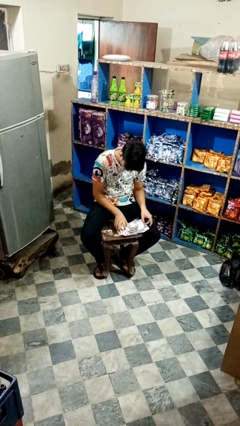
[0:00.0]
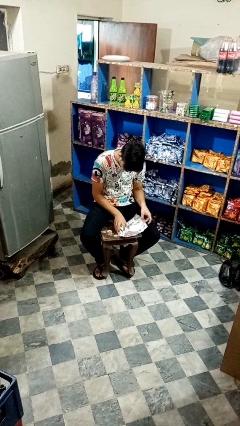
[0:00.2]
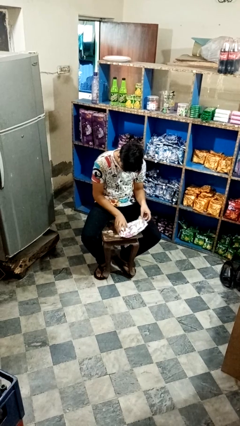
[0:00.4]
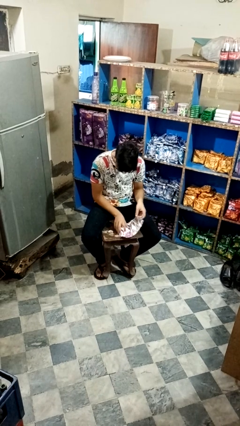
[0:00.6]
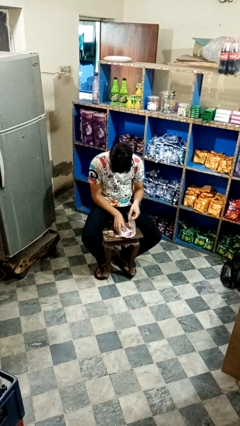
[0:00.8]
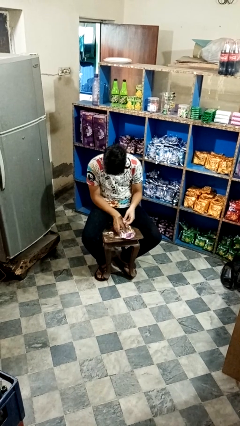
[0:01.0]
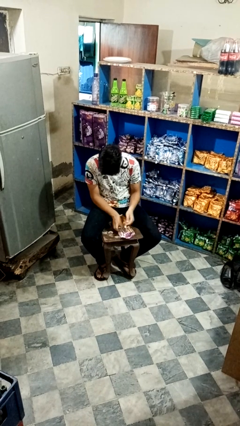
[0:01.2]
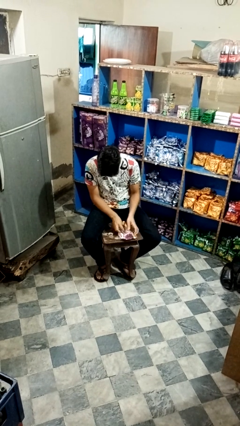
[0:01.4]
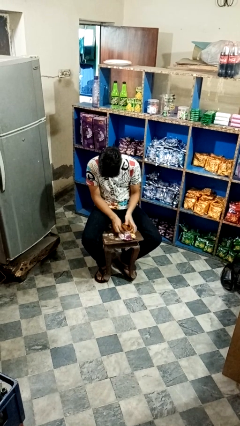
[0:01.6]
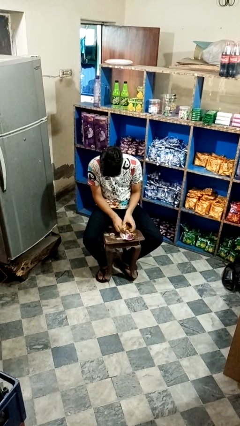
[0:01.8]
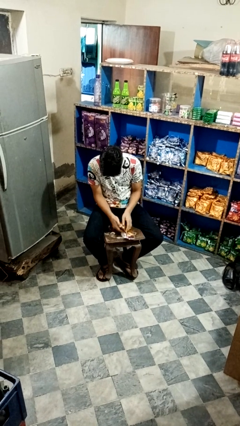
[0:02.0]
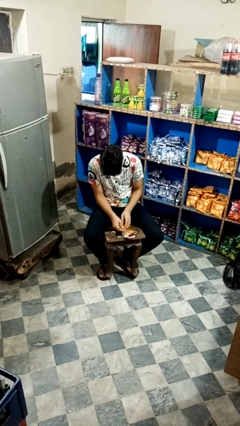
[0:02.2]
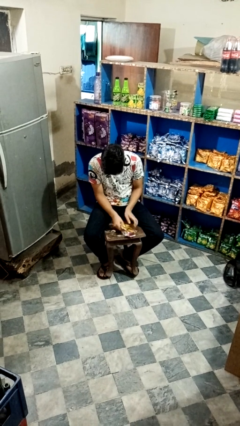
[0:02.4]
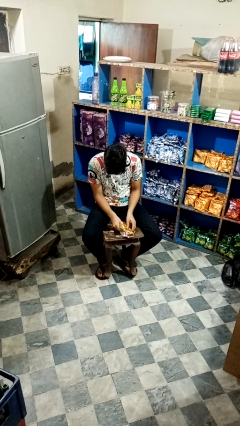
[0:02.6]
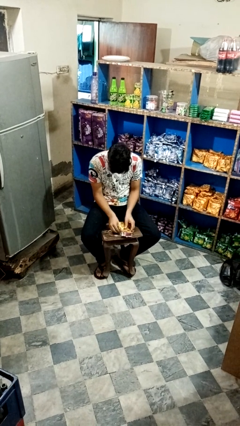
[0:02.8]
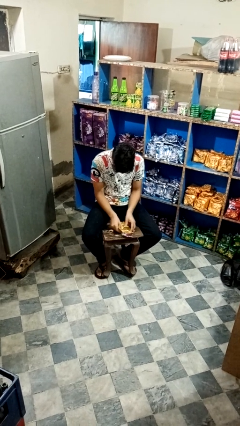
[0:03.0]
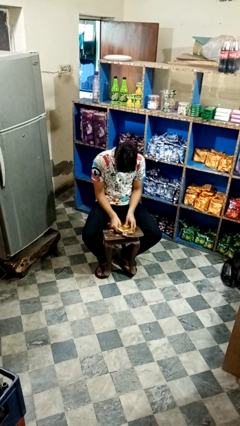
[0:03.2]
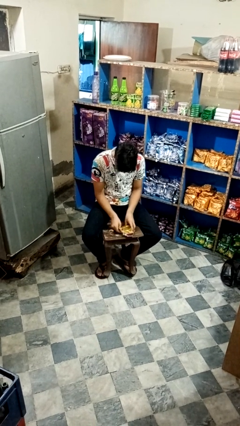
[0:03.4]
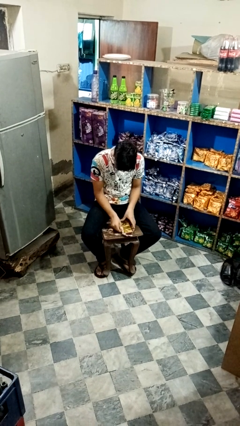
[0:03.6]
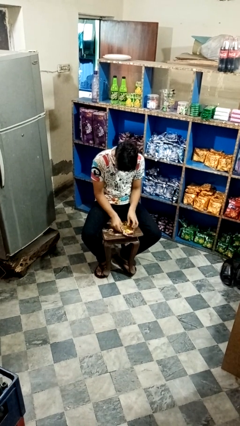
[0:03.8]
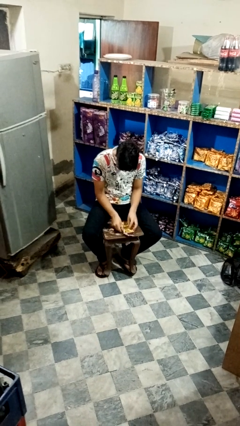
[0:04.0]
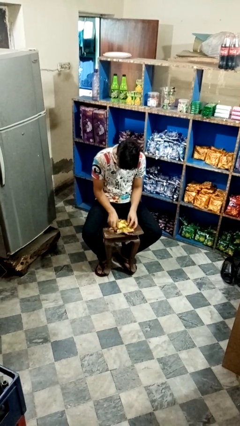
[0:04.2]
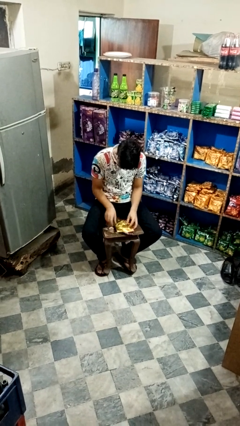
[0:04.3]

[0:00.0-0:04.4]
person wraps box

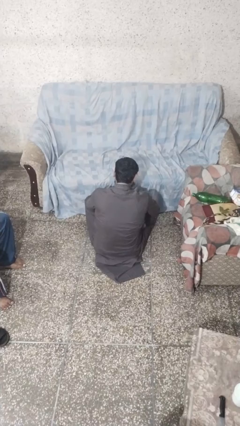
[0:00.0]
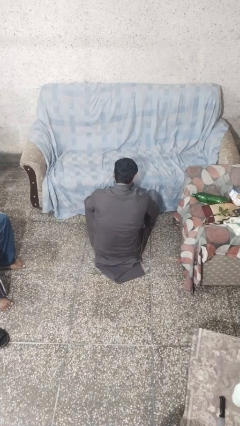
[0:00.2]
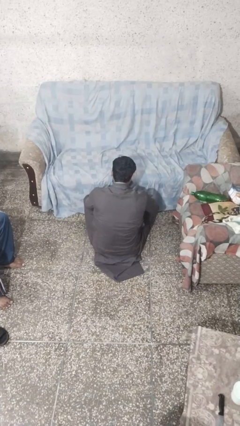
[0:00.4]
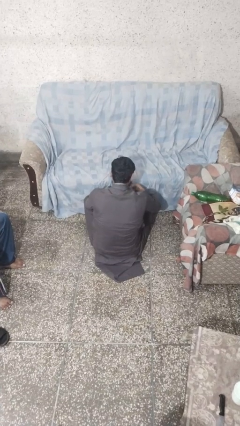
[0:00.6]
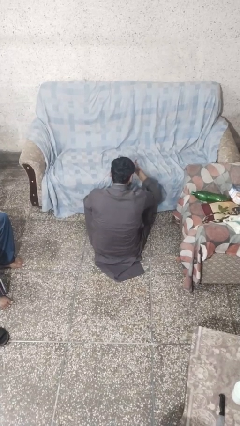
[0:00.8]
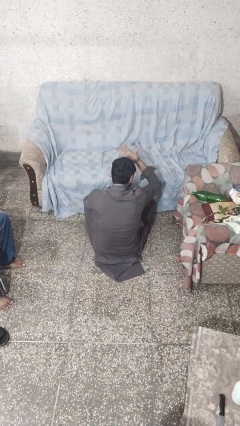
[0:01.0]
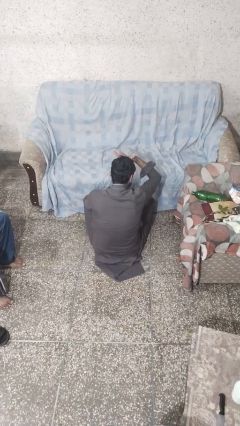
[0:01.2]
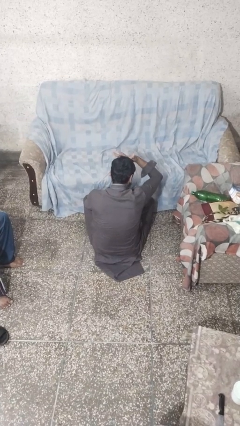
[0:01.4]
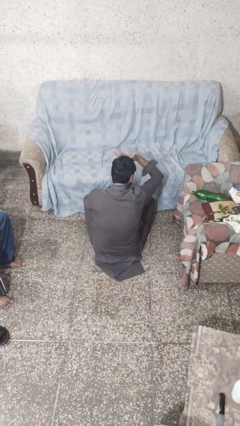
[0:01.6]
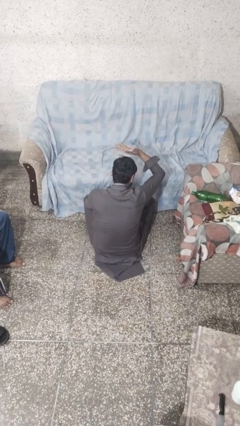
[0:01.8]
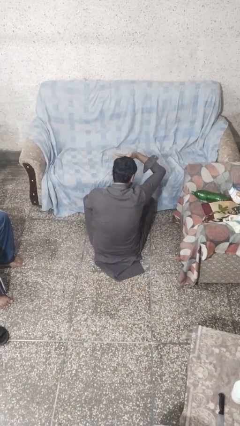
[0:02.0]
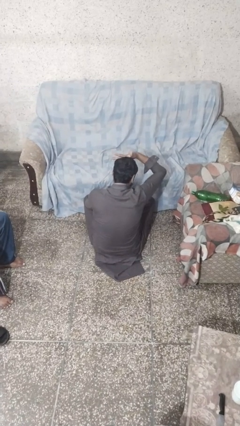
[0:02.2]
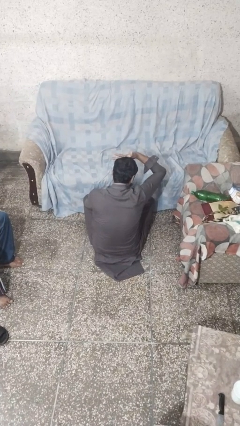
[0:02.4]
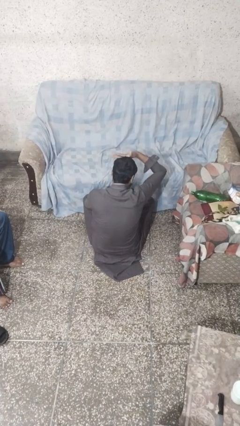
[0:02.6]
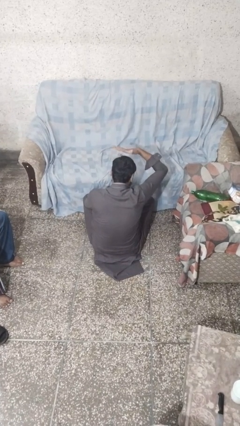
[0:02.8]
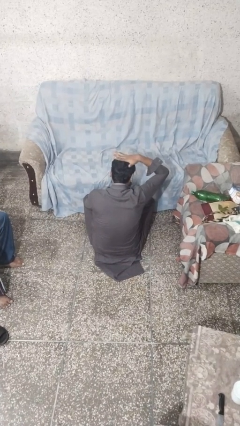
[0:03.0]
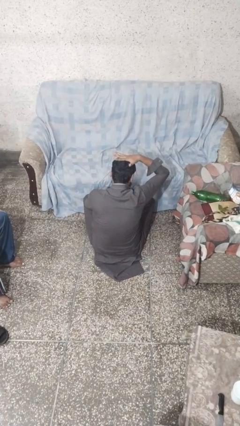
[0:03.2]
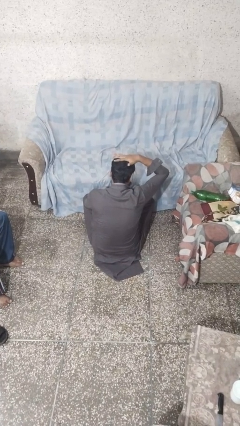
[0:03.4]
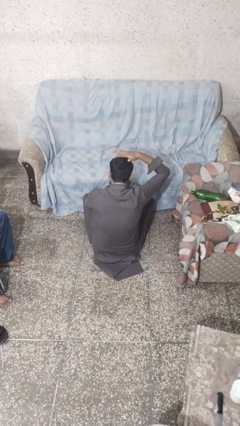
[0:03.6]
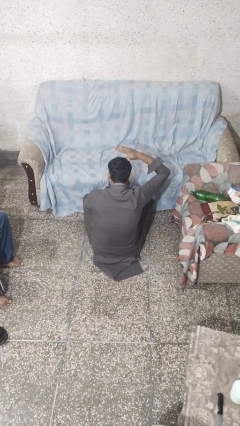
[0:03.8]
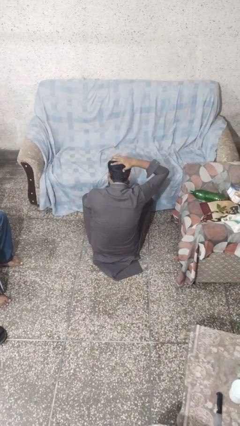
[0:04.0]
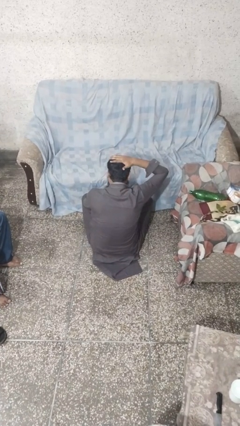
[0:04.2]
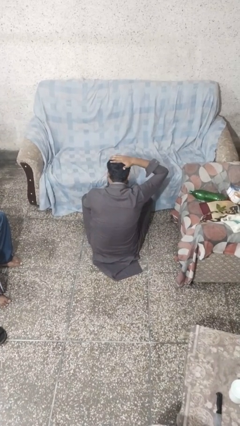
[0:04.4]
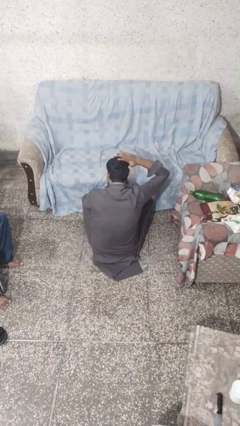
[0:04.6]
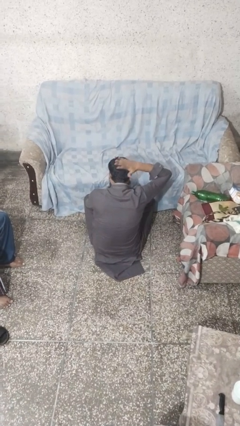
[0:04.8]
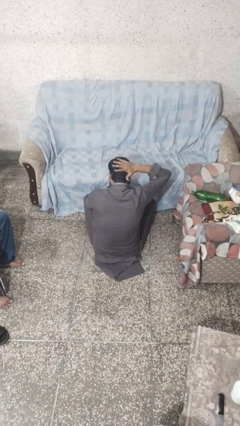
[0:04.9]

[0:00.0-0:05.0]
person pats head

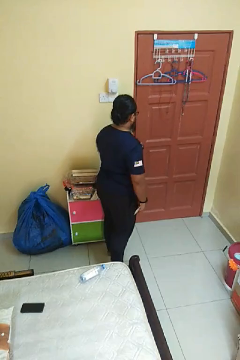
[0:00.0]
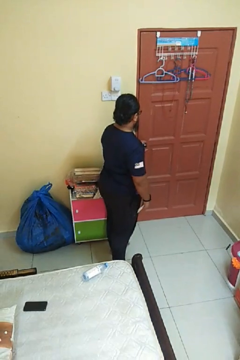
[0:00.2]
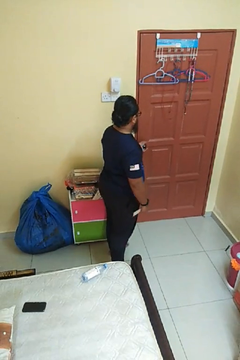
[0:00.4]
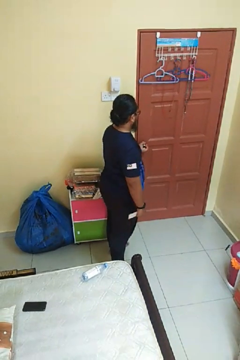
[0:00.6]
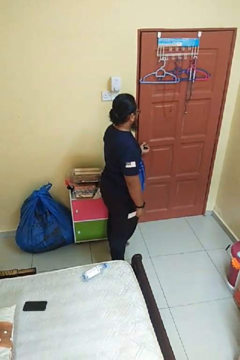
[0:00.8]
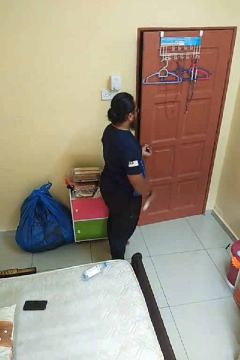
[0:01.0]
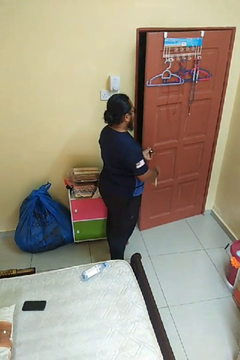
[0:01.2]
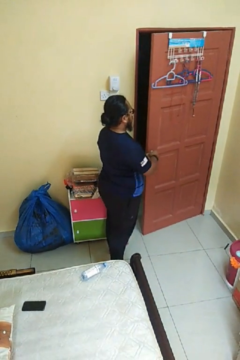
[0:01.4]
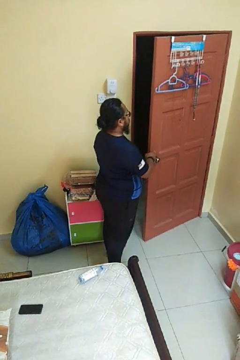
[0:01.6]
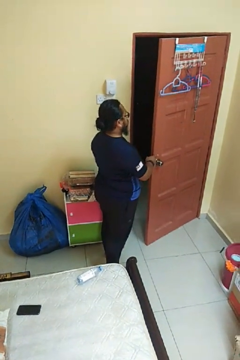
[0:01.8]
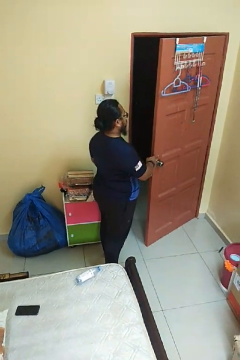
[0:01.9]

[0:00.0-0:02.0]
person opens facility door

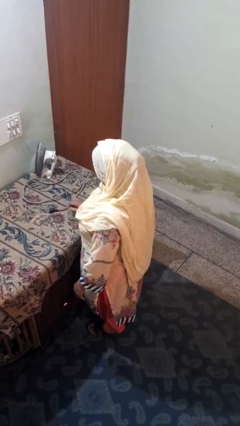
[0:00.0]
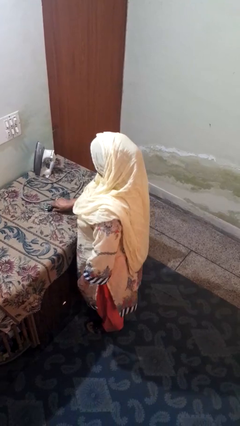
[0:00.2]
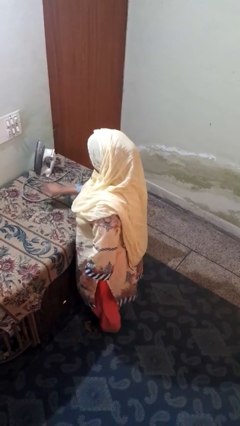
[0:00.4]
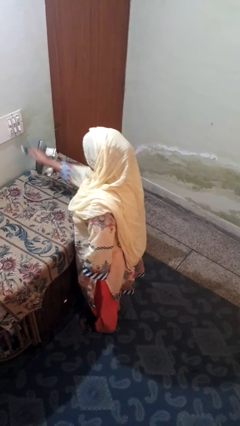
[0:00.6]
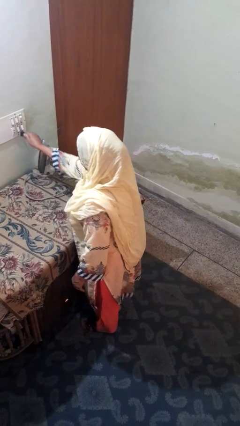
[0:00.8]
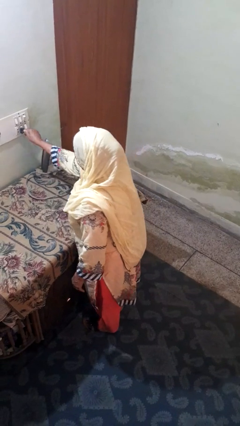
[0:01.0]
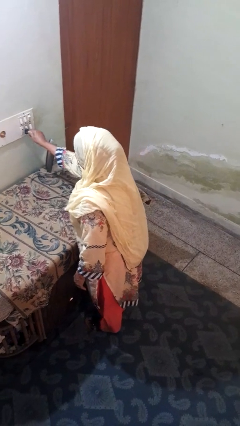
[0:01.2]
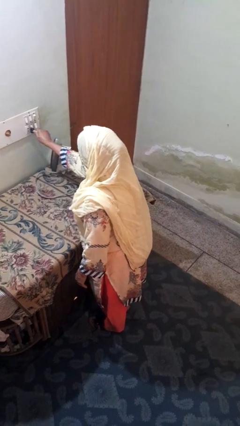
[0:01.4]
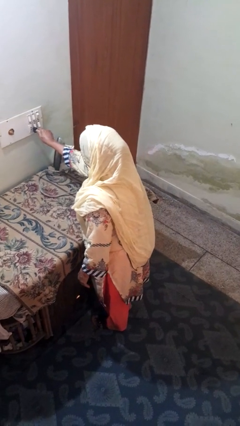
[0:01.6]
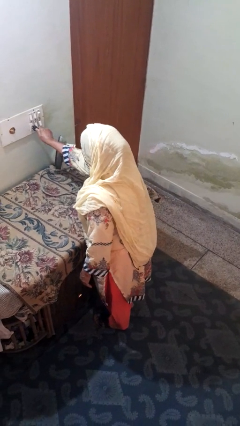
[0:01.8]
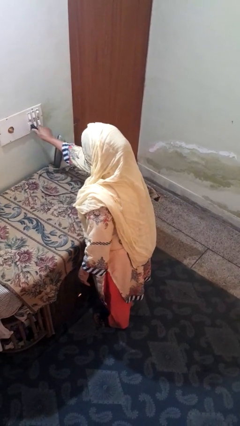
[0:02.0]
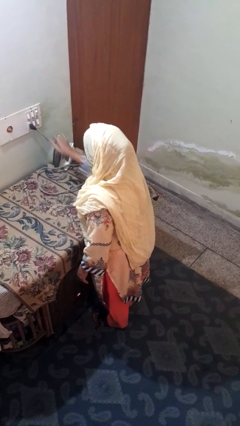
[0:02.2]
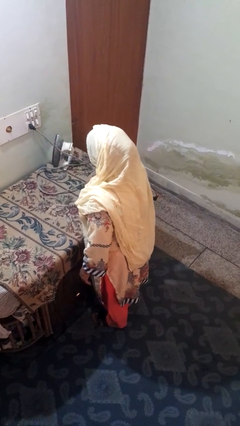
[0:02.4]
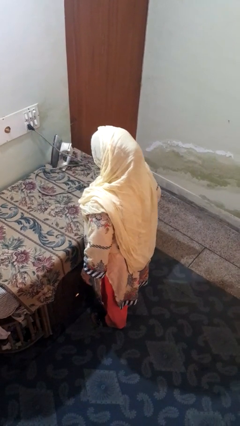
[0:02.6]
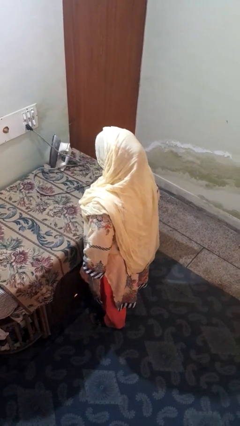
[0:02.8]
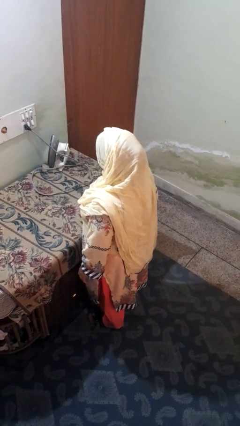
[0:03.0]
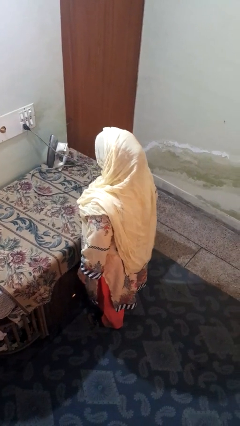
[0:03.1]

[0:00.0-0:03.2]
person plugs into electrical socket

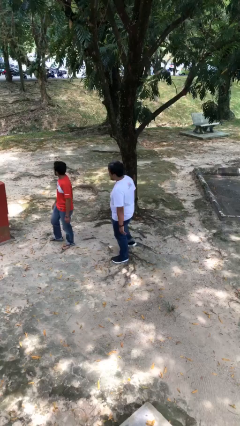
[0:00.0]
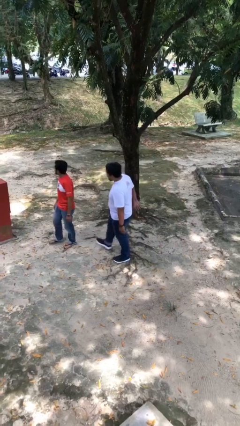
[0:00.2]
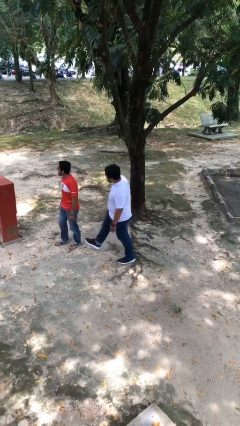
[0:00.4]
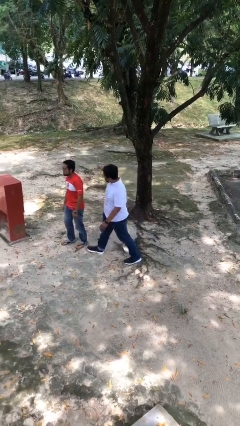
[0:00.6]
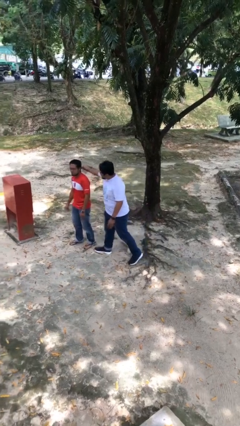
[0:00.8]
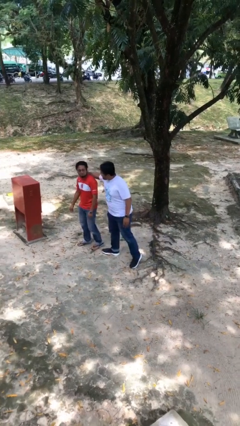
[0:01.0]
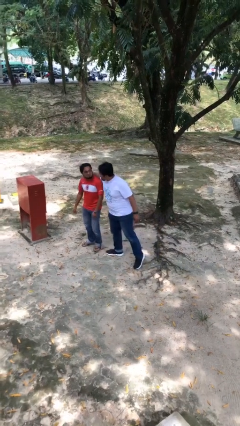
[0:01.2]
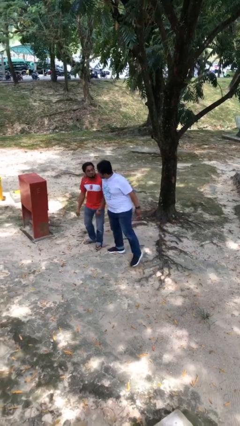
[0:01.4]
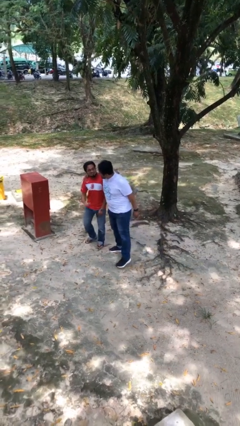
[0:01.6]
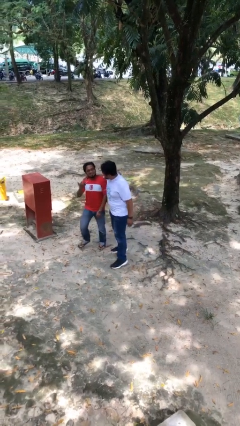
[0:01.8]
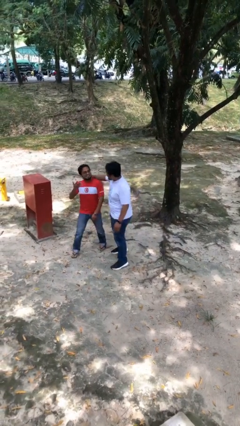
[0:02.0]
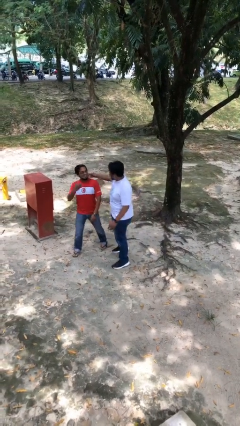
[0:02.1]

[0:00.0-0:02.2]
person embraces person

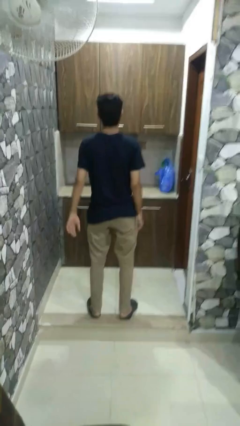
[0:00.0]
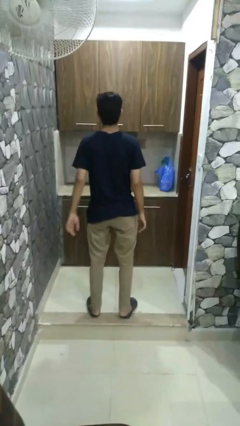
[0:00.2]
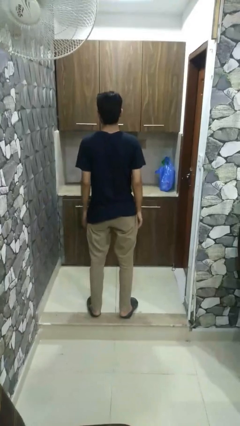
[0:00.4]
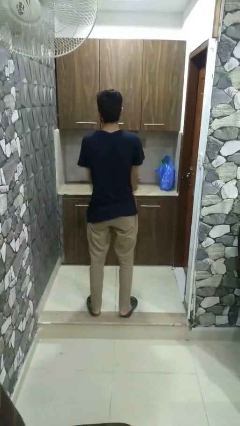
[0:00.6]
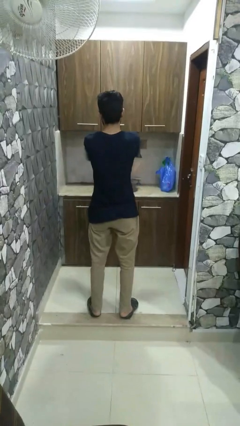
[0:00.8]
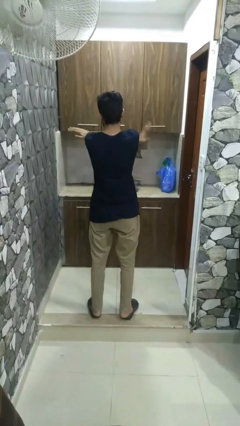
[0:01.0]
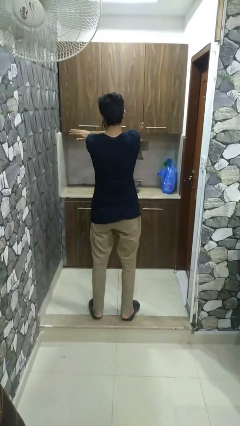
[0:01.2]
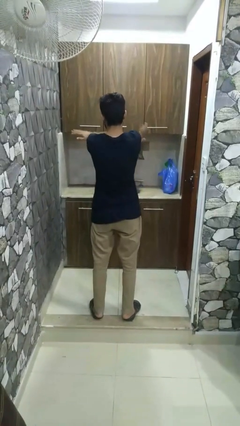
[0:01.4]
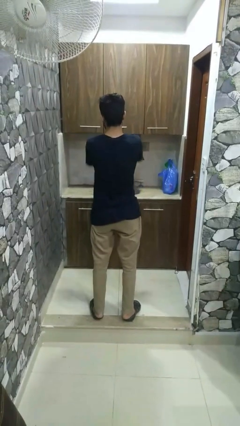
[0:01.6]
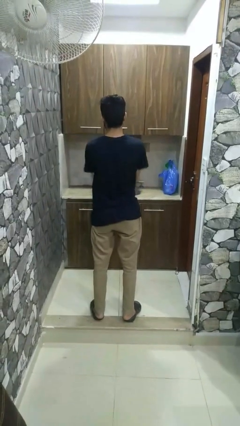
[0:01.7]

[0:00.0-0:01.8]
person crosses arms
